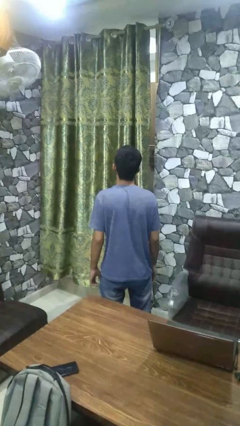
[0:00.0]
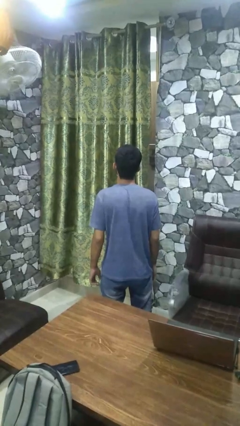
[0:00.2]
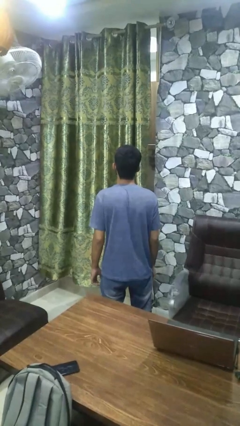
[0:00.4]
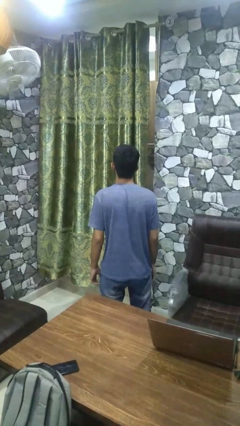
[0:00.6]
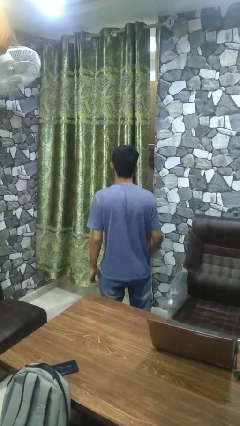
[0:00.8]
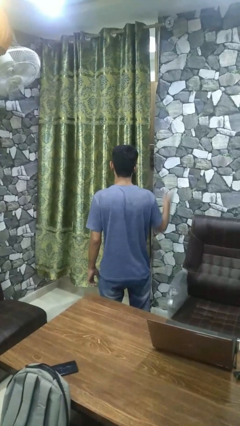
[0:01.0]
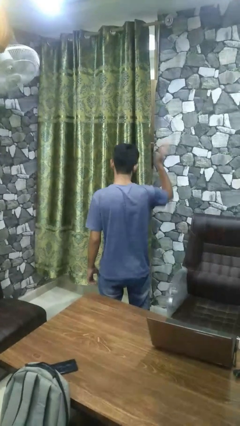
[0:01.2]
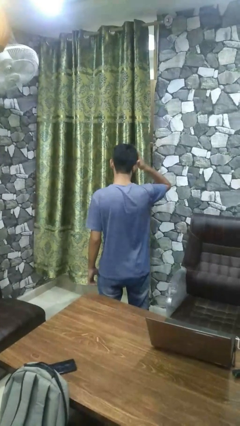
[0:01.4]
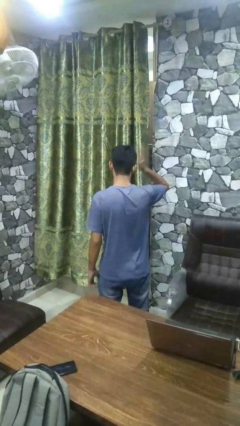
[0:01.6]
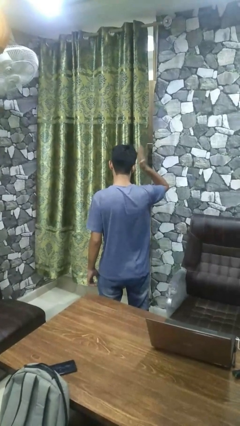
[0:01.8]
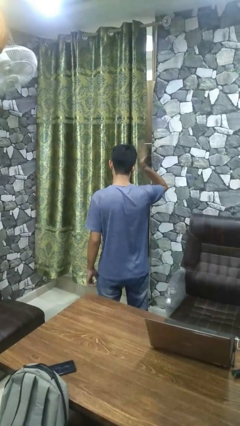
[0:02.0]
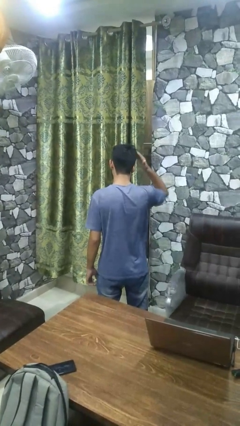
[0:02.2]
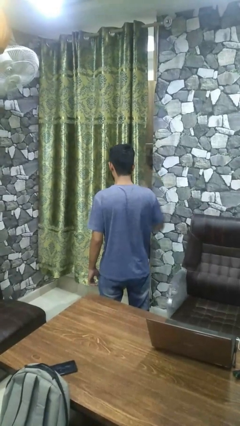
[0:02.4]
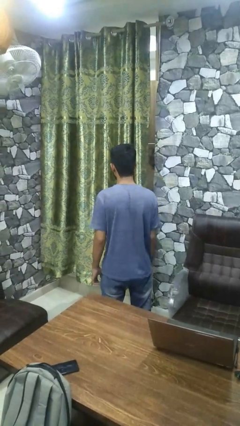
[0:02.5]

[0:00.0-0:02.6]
person pats head

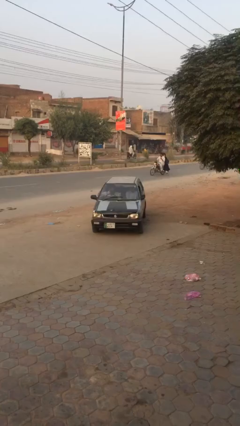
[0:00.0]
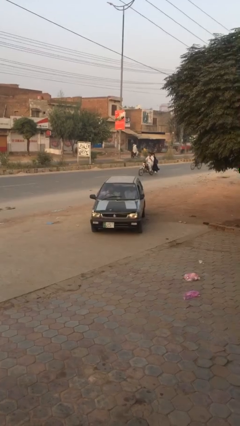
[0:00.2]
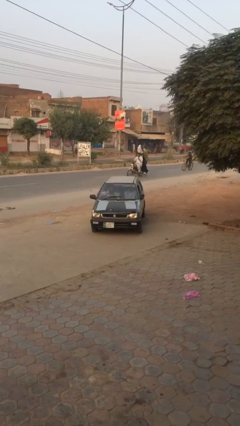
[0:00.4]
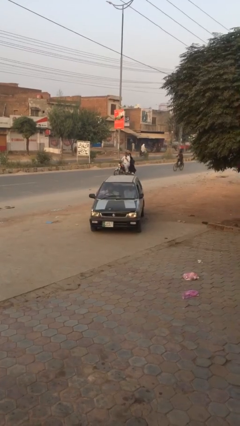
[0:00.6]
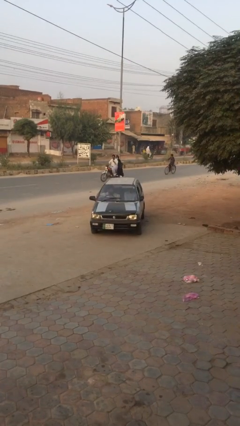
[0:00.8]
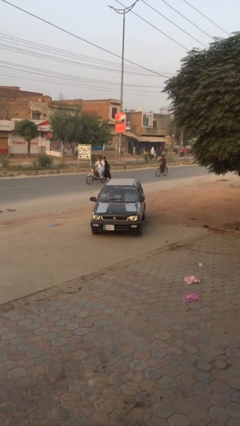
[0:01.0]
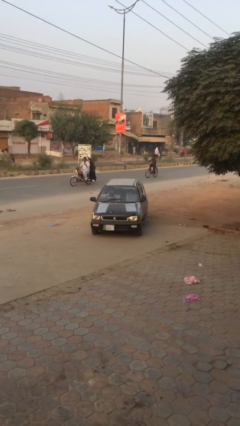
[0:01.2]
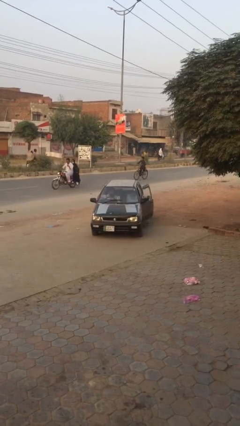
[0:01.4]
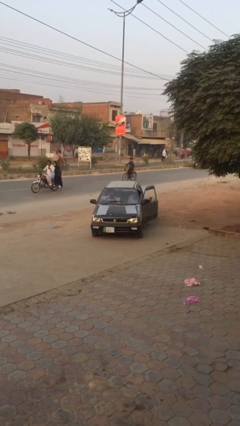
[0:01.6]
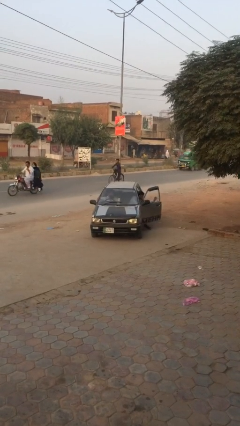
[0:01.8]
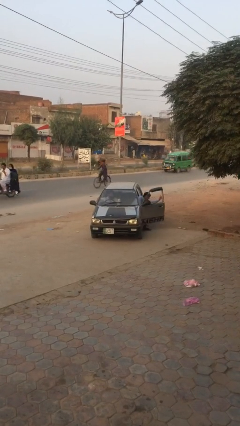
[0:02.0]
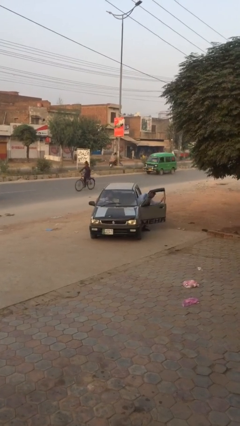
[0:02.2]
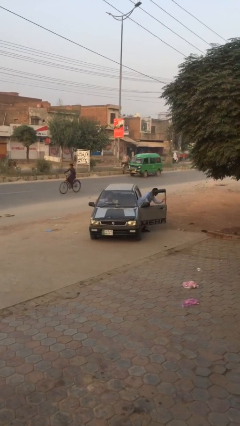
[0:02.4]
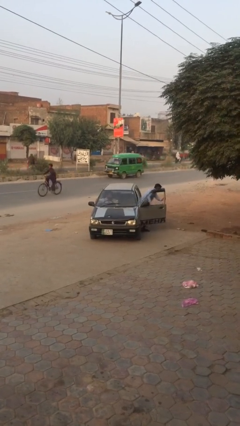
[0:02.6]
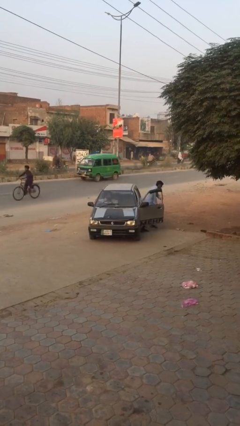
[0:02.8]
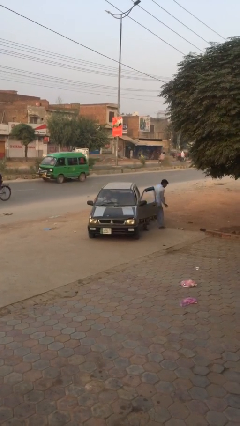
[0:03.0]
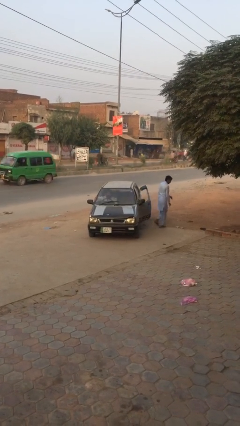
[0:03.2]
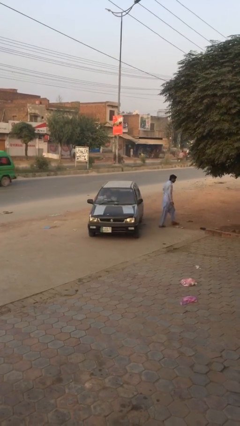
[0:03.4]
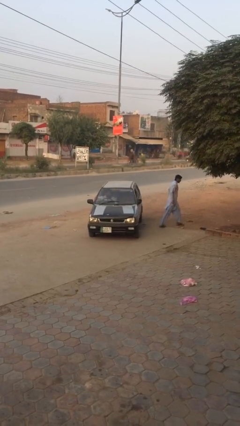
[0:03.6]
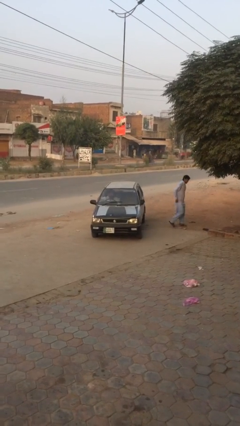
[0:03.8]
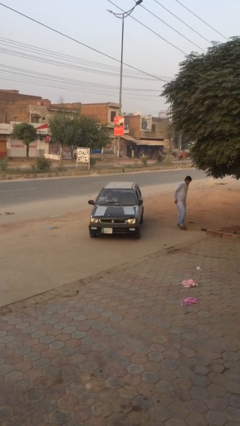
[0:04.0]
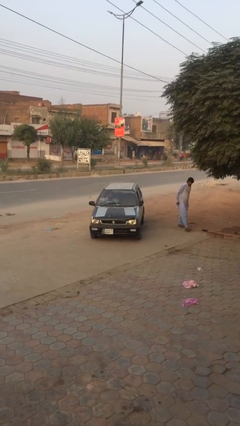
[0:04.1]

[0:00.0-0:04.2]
car drops off person

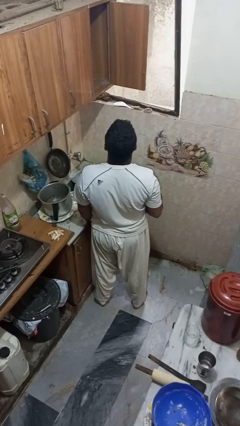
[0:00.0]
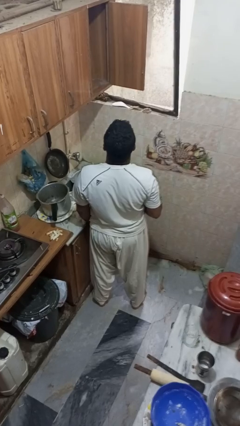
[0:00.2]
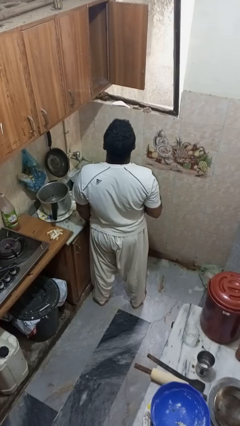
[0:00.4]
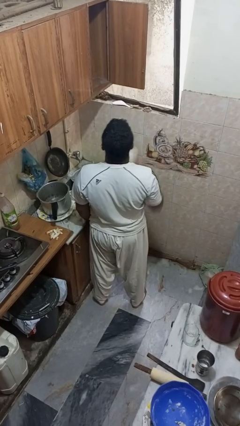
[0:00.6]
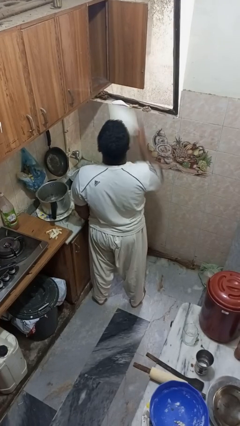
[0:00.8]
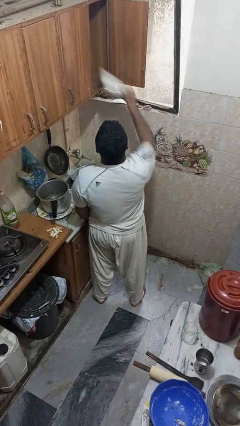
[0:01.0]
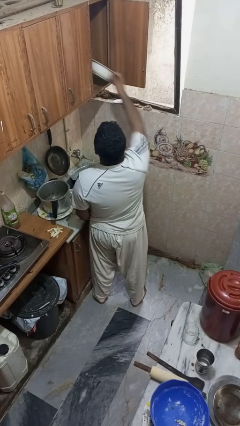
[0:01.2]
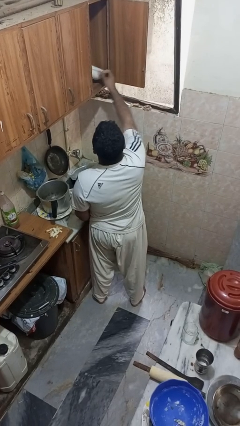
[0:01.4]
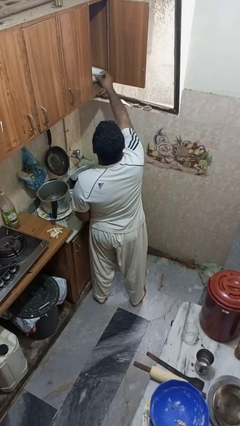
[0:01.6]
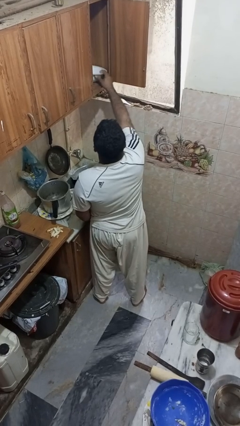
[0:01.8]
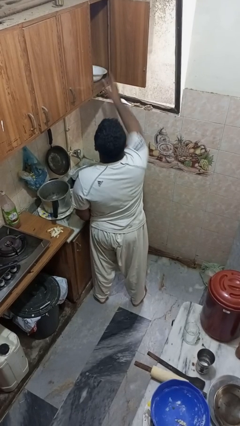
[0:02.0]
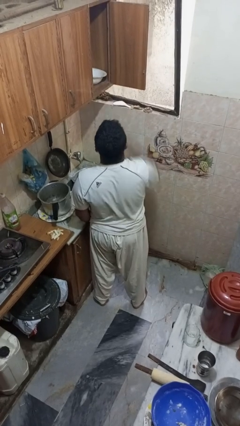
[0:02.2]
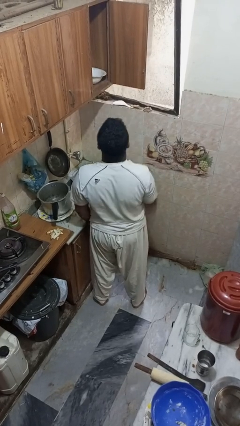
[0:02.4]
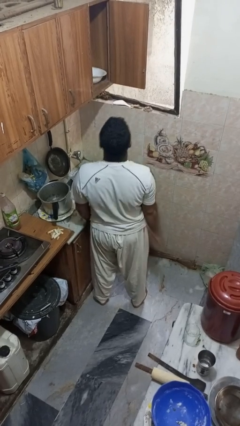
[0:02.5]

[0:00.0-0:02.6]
person puts object in cabinet

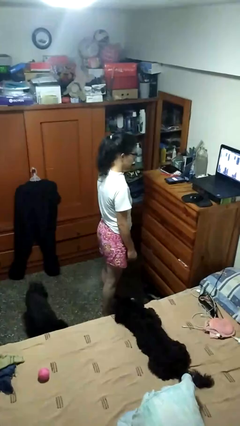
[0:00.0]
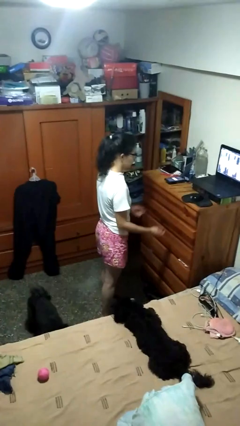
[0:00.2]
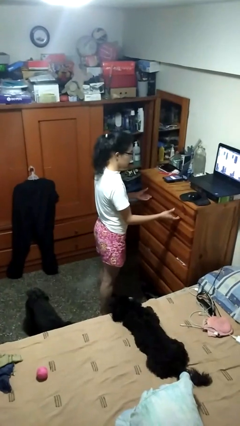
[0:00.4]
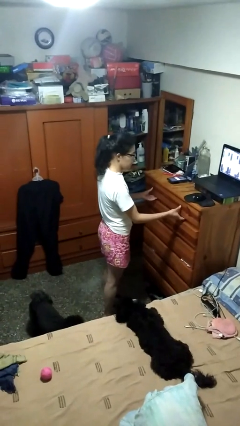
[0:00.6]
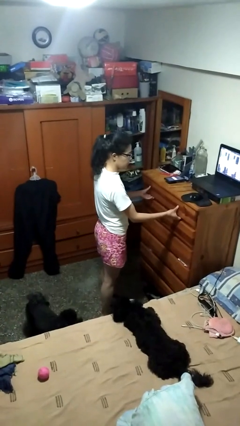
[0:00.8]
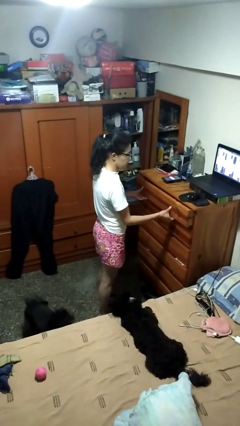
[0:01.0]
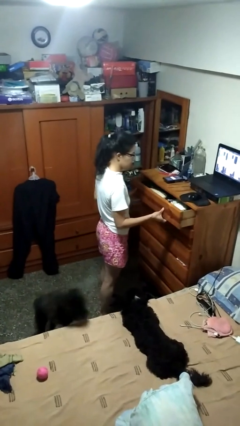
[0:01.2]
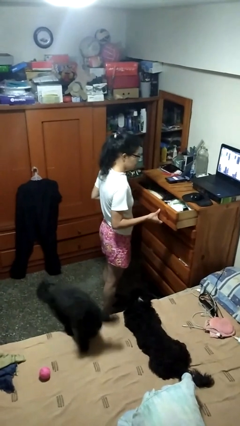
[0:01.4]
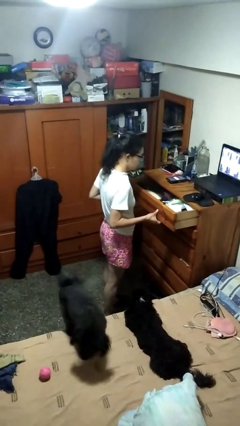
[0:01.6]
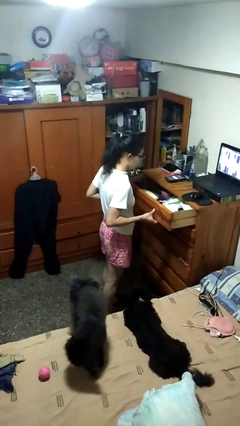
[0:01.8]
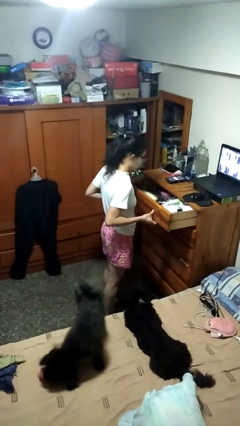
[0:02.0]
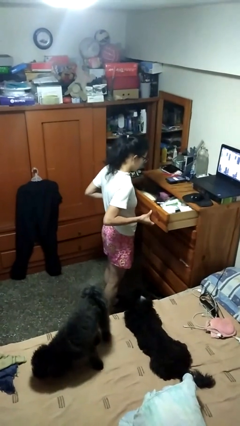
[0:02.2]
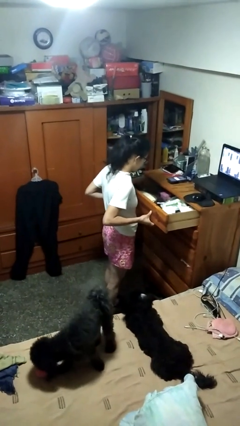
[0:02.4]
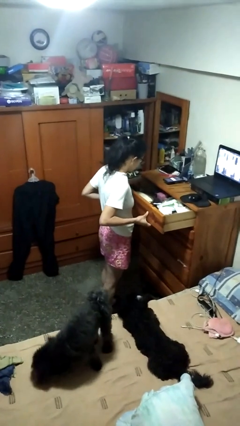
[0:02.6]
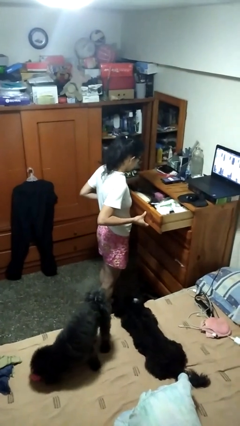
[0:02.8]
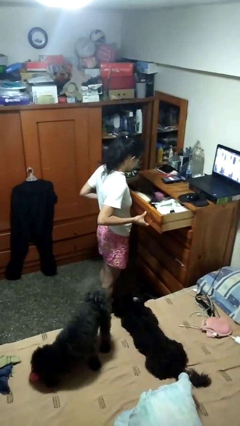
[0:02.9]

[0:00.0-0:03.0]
person opens dresser drawer

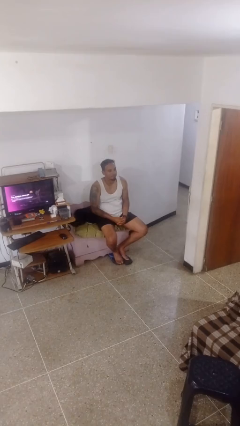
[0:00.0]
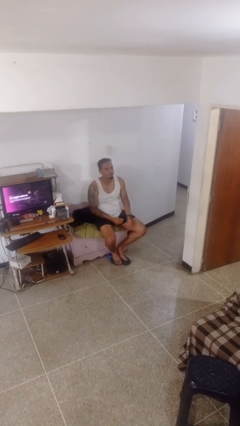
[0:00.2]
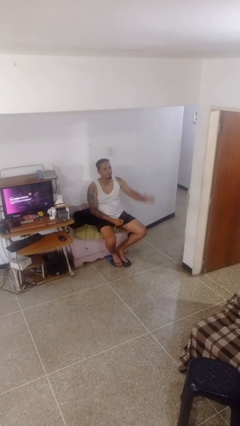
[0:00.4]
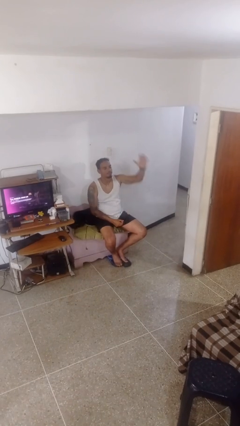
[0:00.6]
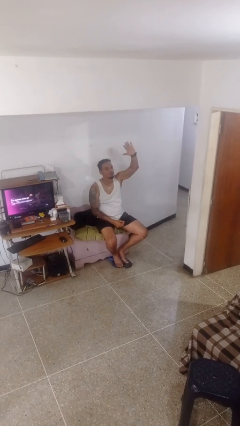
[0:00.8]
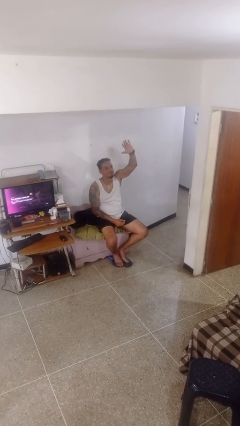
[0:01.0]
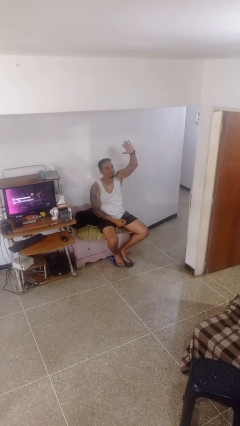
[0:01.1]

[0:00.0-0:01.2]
person gestures raise hand

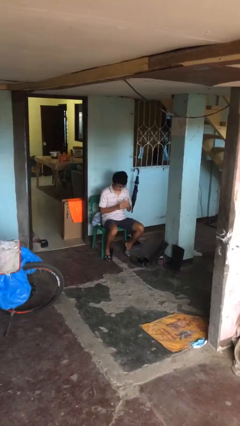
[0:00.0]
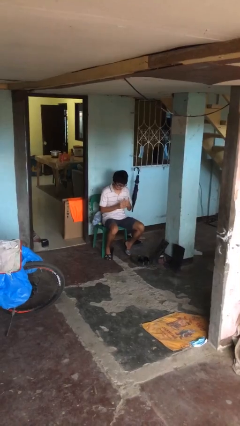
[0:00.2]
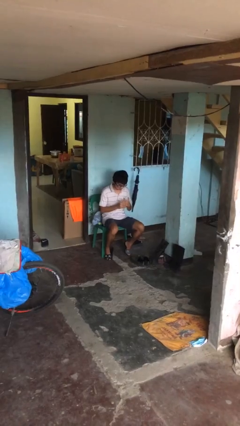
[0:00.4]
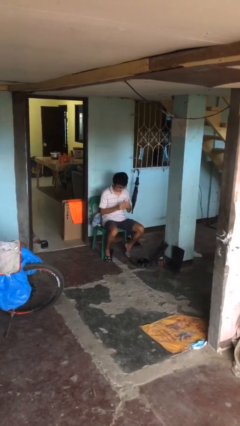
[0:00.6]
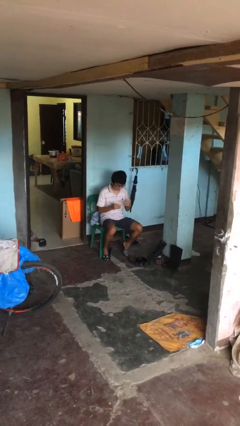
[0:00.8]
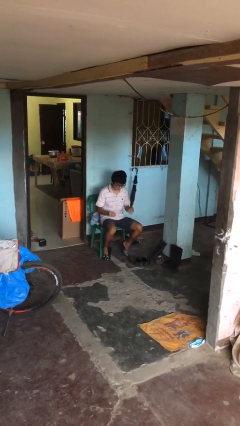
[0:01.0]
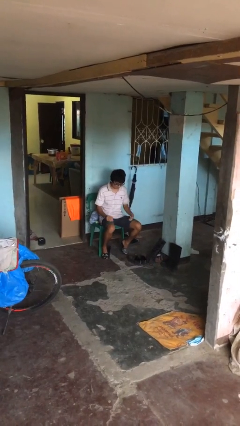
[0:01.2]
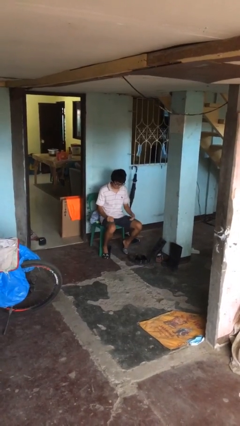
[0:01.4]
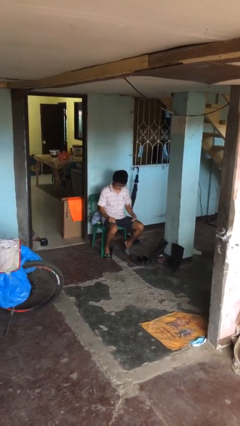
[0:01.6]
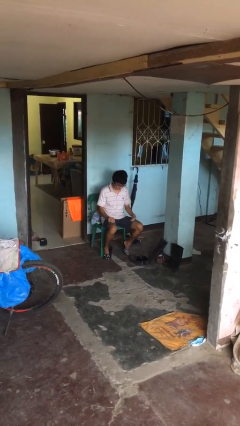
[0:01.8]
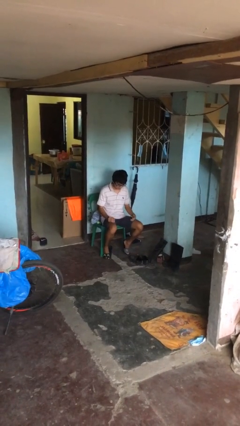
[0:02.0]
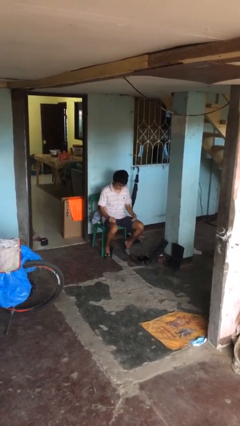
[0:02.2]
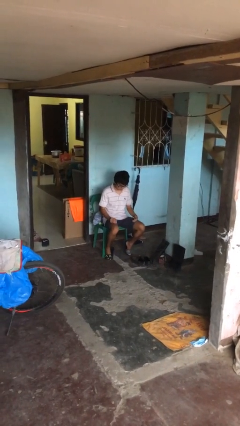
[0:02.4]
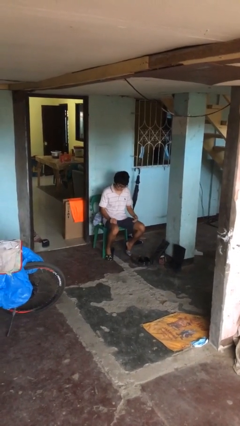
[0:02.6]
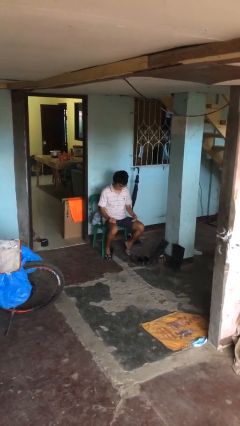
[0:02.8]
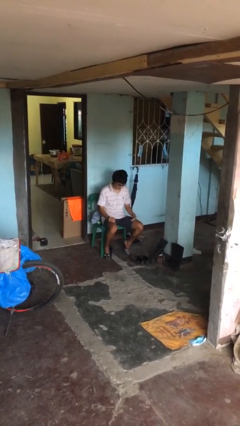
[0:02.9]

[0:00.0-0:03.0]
person takes off ring

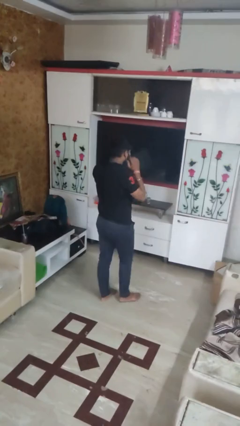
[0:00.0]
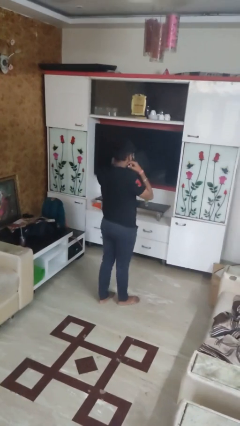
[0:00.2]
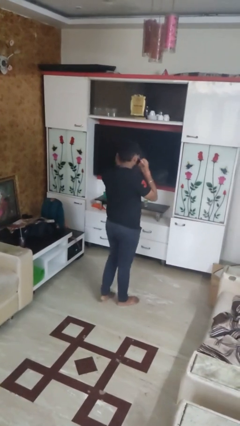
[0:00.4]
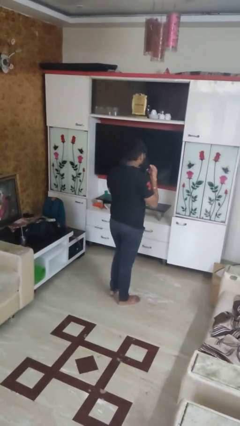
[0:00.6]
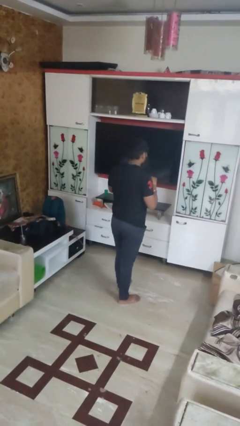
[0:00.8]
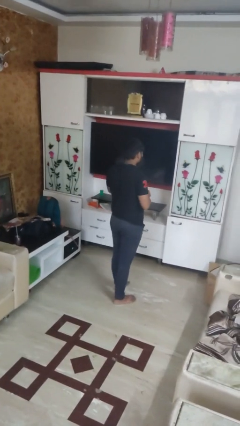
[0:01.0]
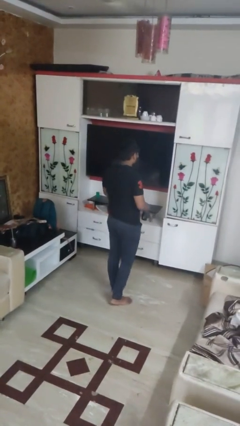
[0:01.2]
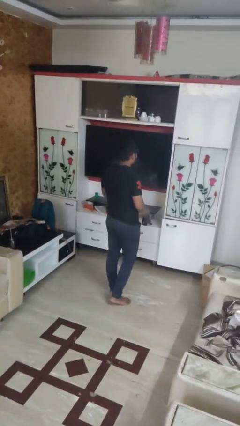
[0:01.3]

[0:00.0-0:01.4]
person takes off facemask
